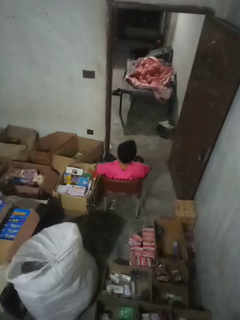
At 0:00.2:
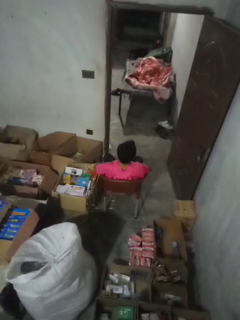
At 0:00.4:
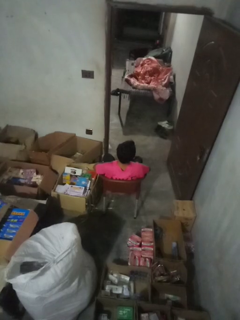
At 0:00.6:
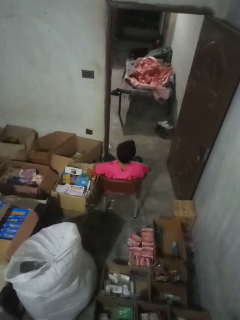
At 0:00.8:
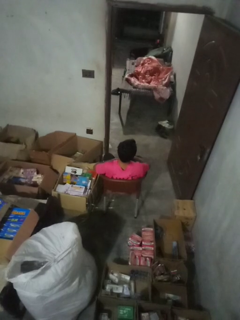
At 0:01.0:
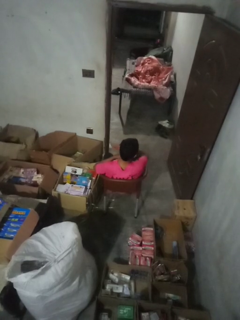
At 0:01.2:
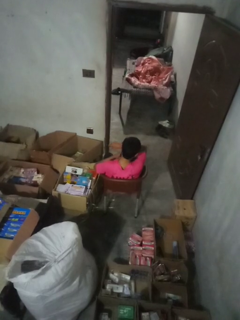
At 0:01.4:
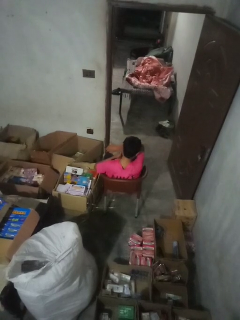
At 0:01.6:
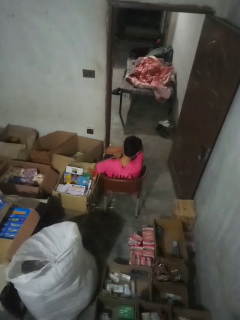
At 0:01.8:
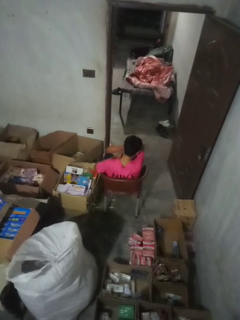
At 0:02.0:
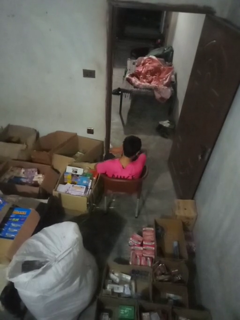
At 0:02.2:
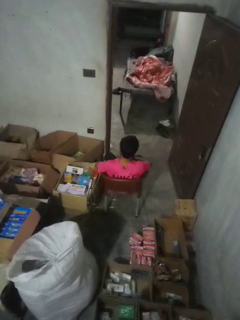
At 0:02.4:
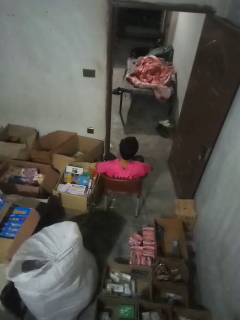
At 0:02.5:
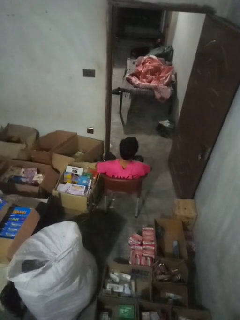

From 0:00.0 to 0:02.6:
person sneezes into arm

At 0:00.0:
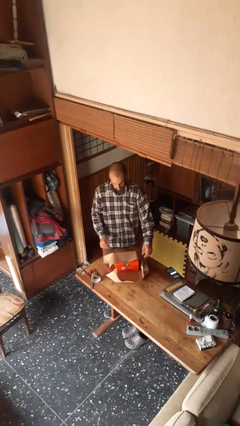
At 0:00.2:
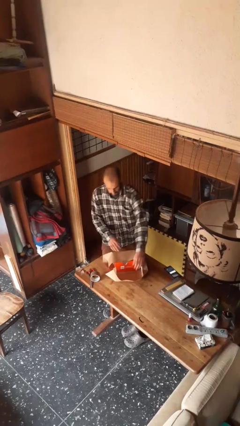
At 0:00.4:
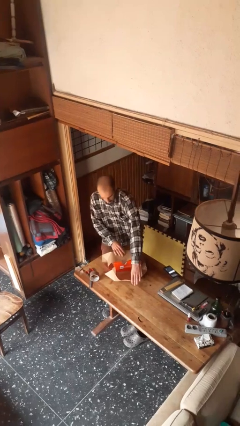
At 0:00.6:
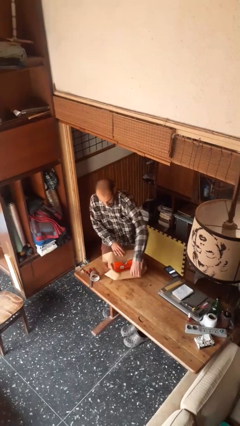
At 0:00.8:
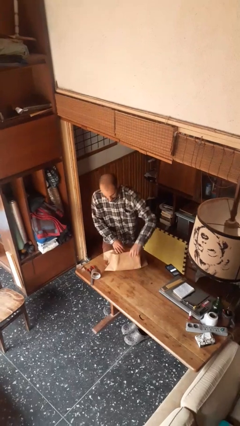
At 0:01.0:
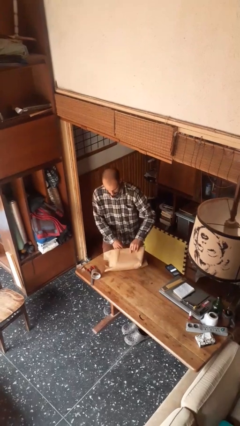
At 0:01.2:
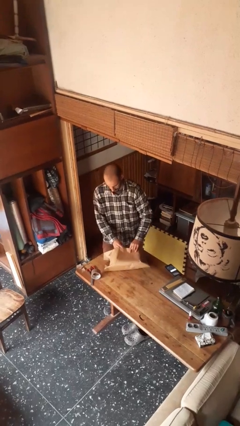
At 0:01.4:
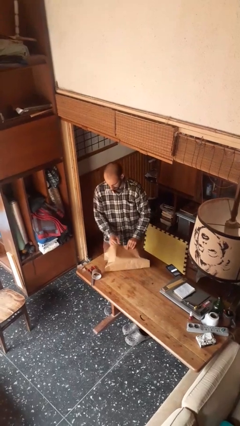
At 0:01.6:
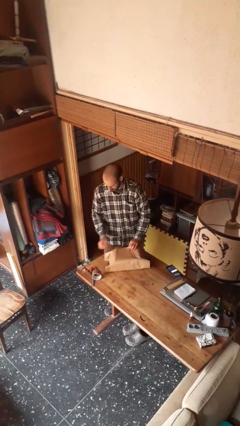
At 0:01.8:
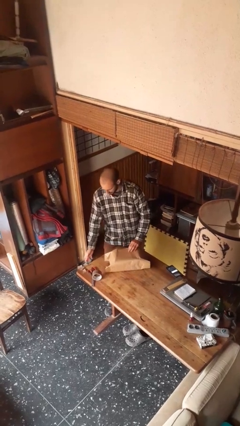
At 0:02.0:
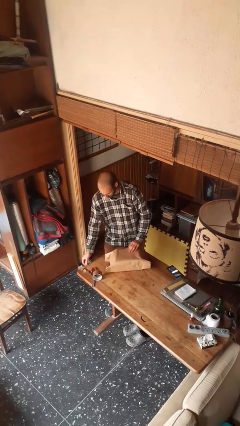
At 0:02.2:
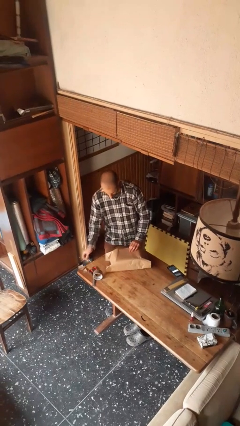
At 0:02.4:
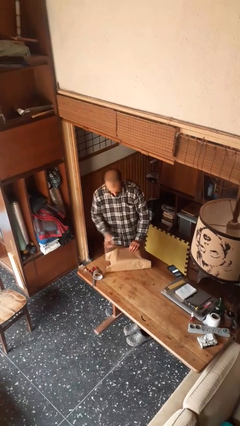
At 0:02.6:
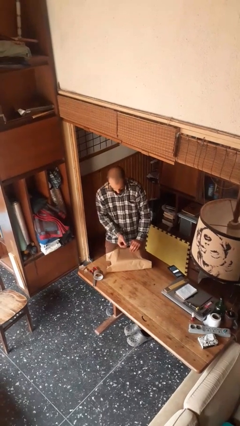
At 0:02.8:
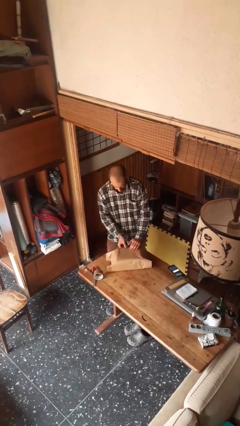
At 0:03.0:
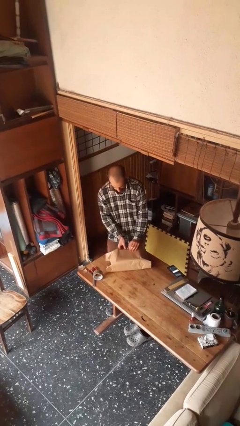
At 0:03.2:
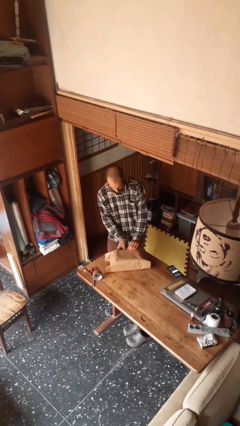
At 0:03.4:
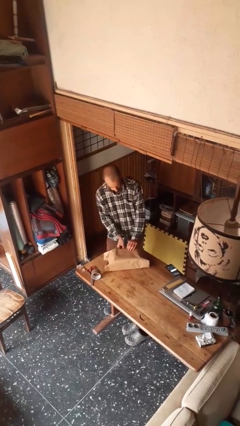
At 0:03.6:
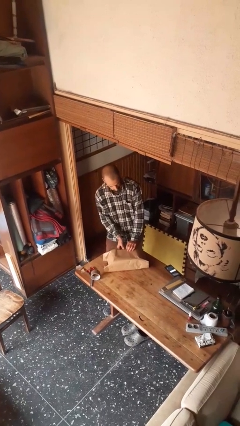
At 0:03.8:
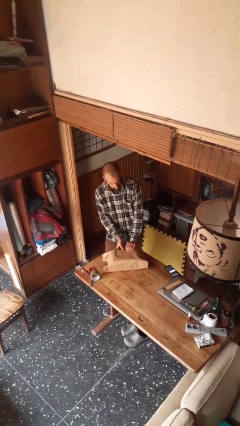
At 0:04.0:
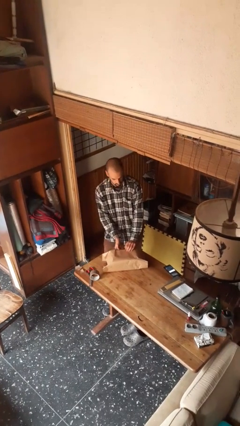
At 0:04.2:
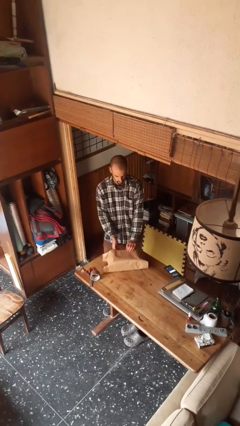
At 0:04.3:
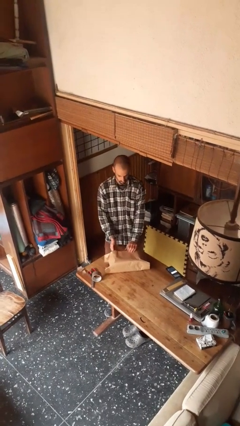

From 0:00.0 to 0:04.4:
person wraps box

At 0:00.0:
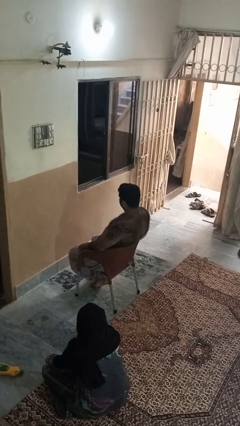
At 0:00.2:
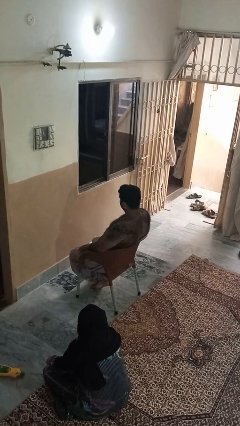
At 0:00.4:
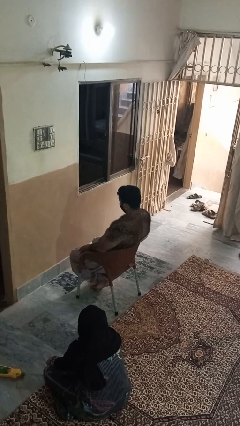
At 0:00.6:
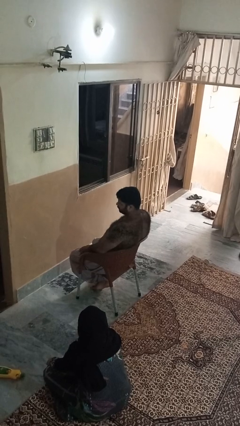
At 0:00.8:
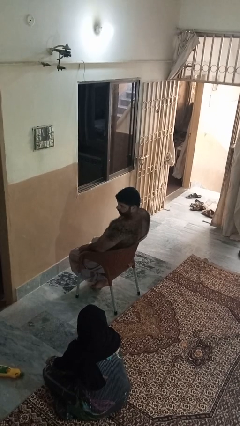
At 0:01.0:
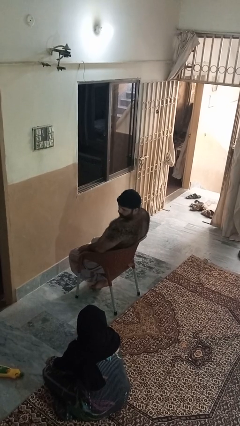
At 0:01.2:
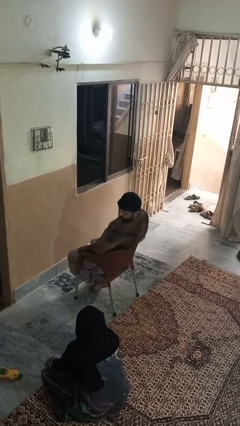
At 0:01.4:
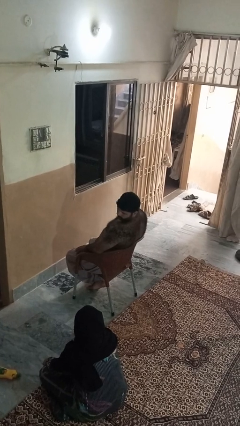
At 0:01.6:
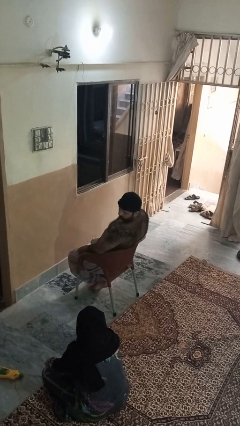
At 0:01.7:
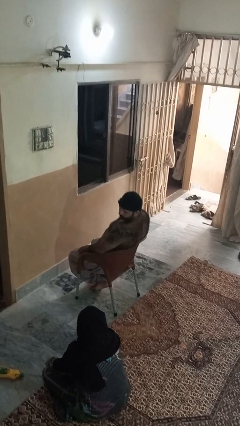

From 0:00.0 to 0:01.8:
person looks over shoulder

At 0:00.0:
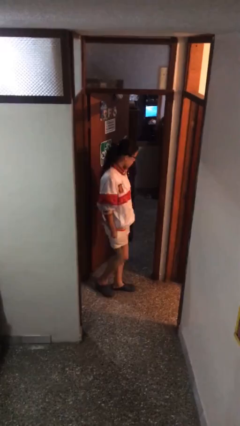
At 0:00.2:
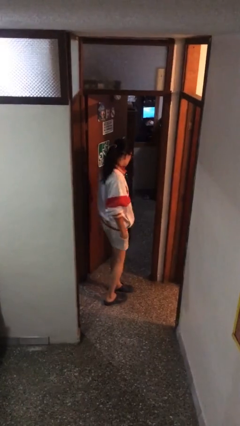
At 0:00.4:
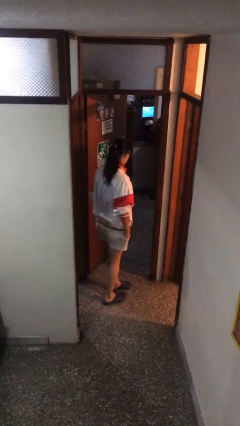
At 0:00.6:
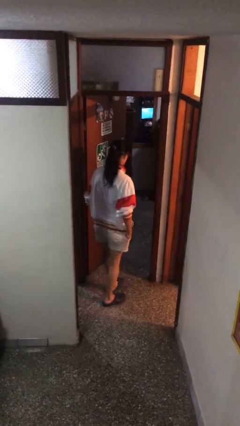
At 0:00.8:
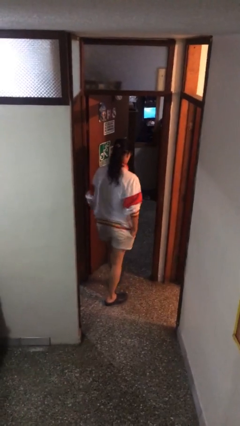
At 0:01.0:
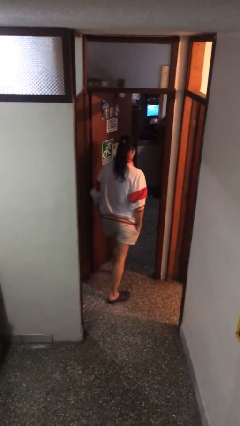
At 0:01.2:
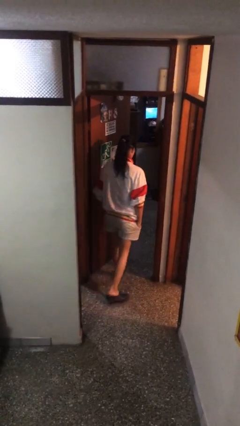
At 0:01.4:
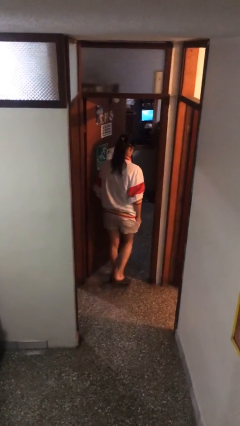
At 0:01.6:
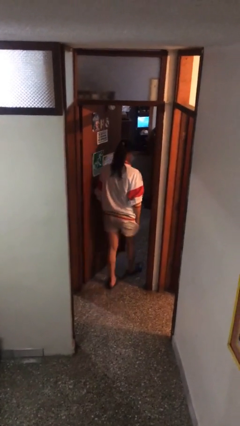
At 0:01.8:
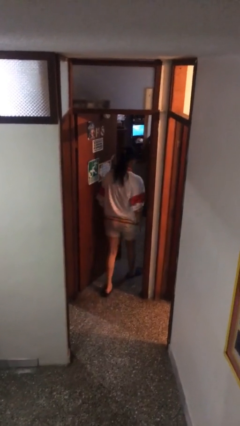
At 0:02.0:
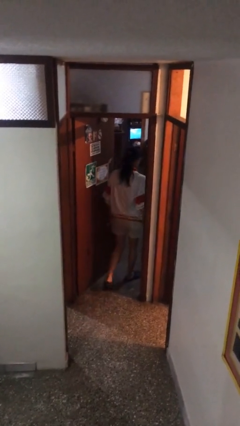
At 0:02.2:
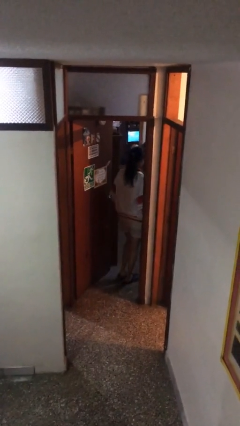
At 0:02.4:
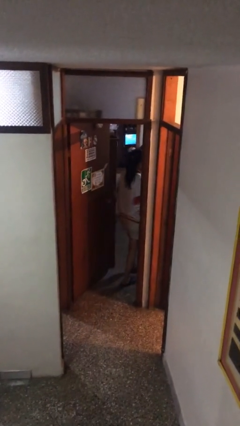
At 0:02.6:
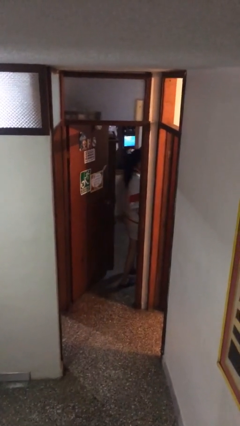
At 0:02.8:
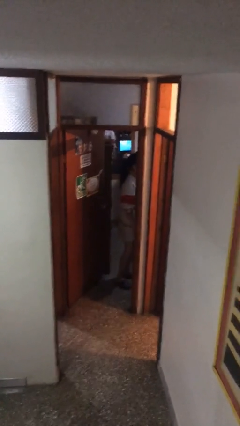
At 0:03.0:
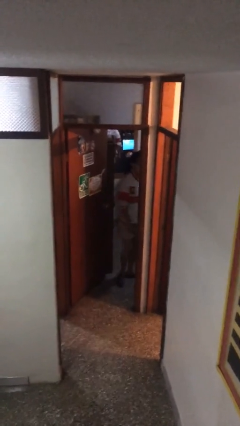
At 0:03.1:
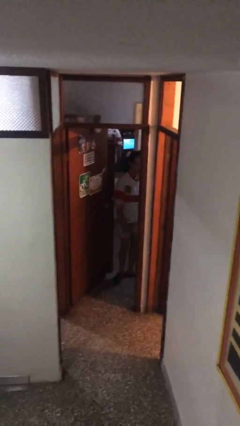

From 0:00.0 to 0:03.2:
person exits scene through structure

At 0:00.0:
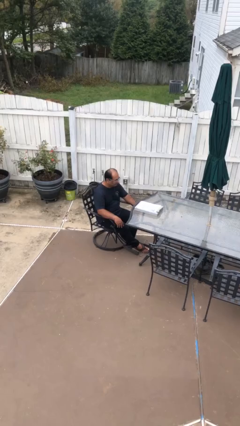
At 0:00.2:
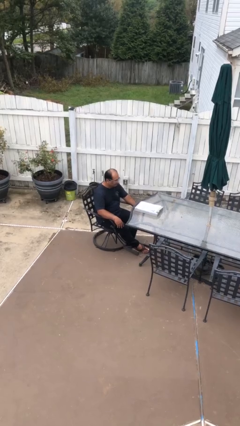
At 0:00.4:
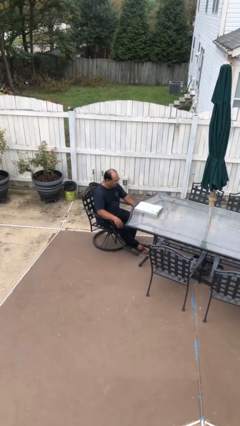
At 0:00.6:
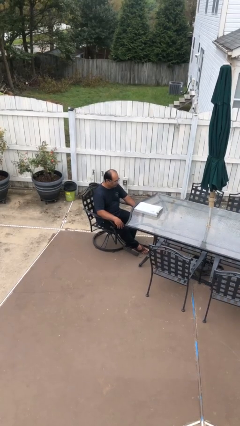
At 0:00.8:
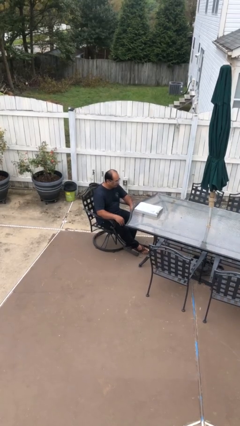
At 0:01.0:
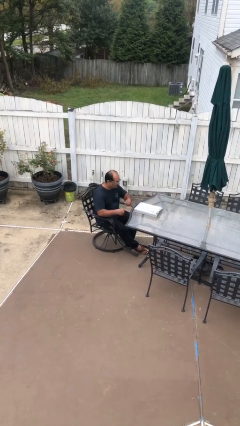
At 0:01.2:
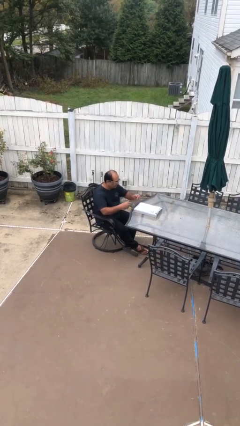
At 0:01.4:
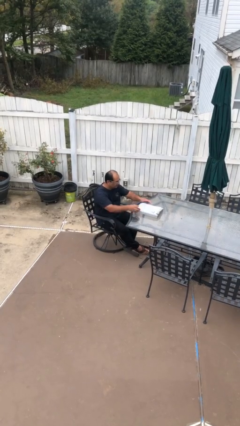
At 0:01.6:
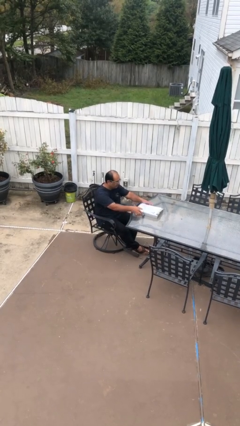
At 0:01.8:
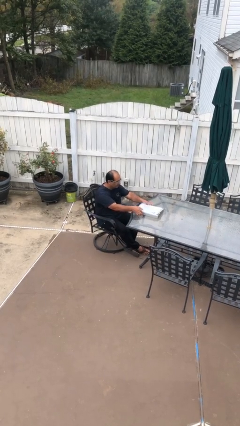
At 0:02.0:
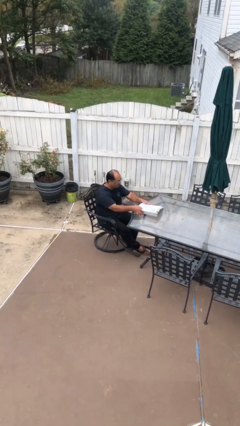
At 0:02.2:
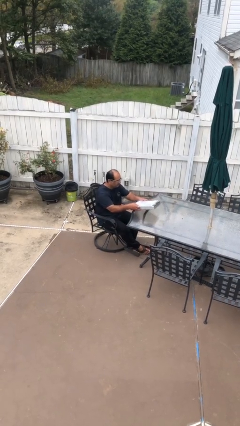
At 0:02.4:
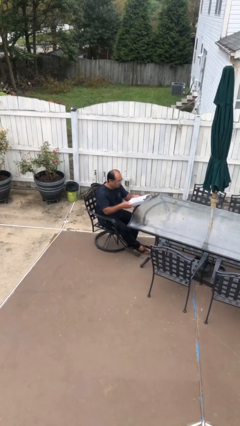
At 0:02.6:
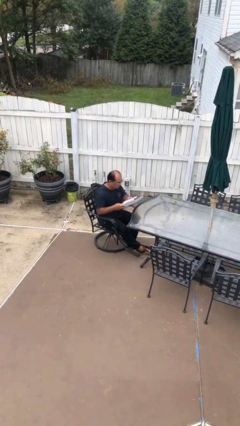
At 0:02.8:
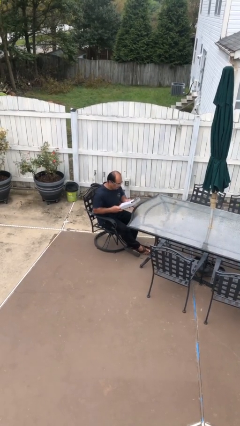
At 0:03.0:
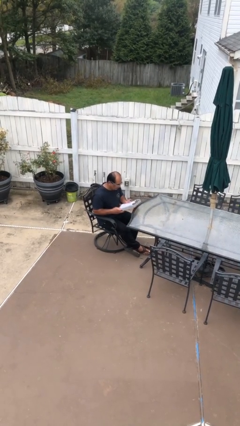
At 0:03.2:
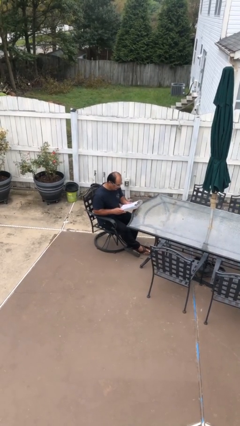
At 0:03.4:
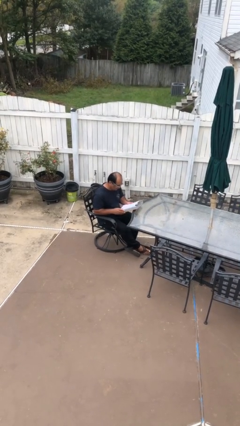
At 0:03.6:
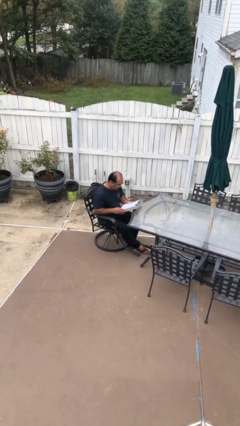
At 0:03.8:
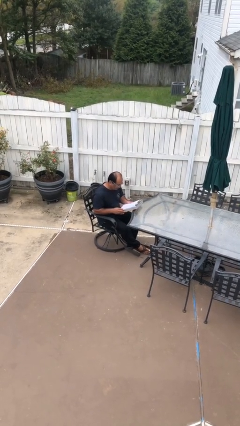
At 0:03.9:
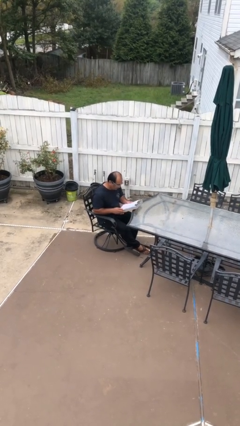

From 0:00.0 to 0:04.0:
person picks up object from table

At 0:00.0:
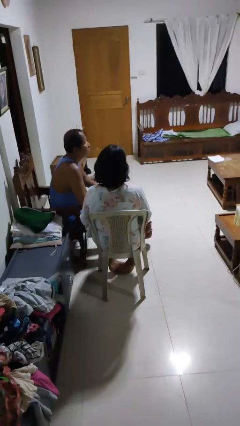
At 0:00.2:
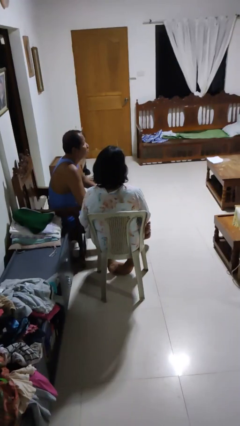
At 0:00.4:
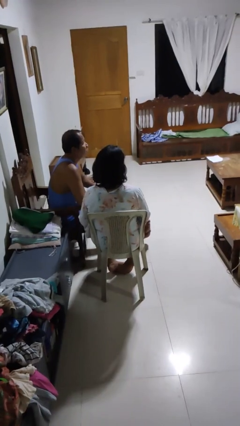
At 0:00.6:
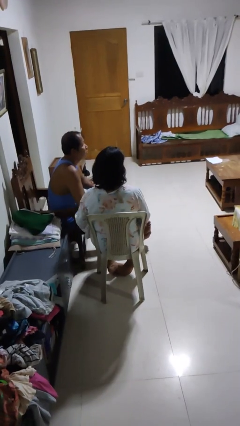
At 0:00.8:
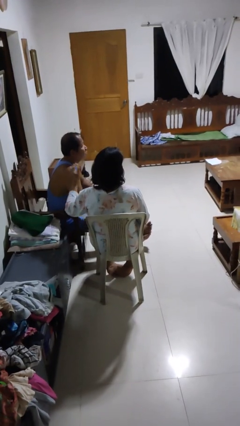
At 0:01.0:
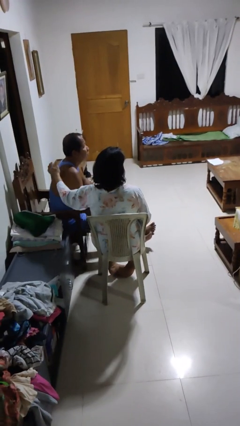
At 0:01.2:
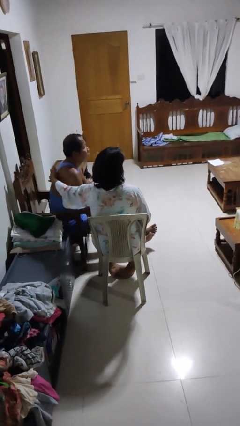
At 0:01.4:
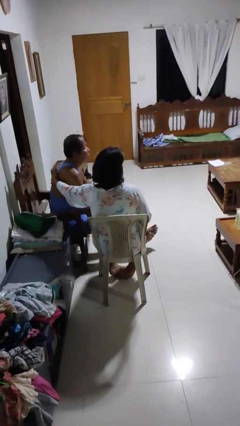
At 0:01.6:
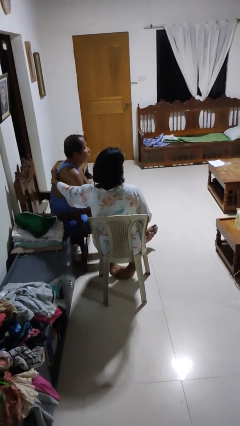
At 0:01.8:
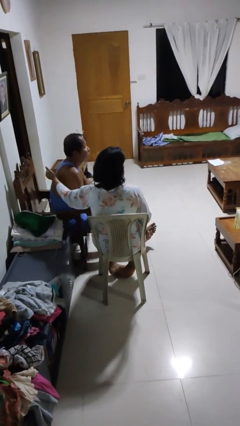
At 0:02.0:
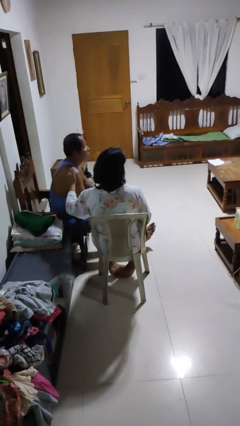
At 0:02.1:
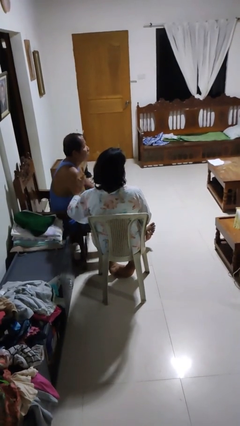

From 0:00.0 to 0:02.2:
person touches back of person
